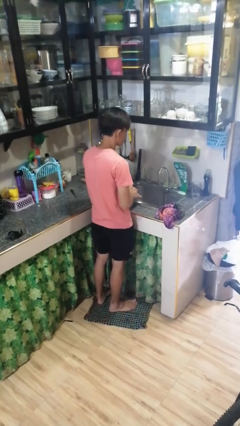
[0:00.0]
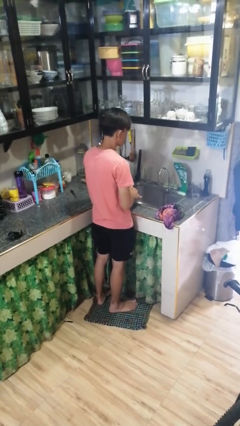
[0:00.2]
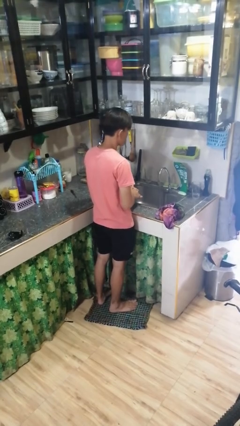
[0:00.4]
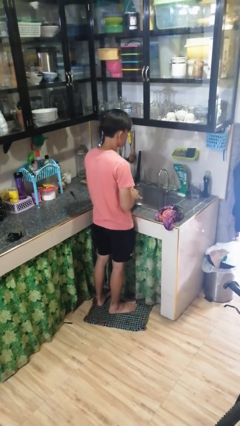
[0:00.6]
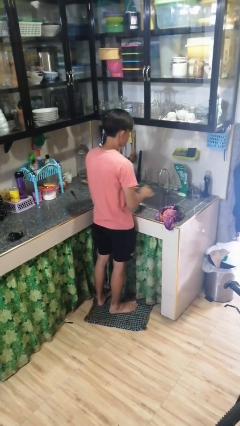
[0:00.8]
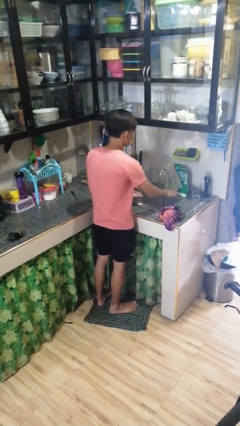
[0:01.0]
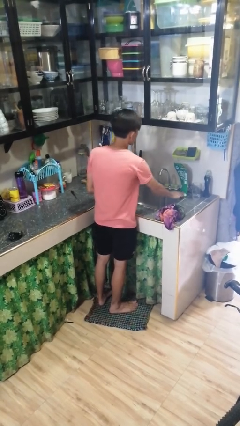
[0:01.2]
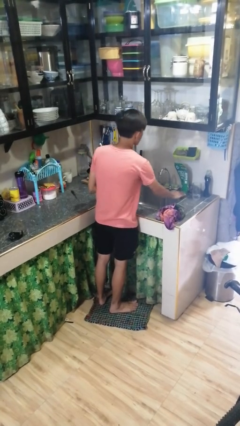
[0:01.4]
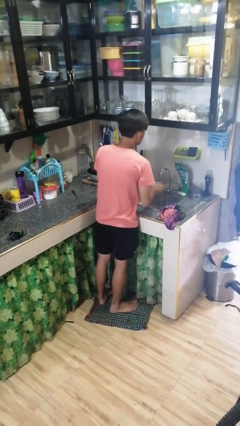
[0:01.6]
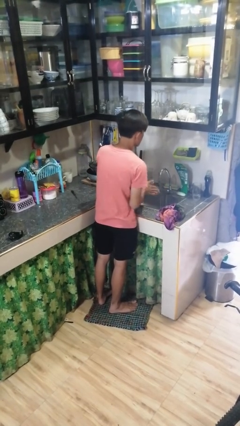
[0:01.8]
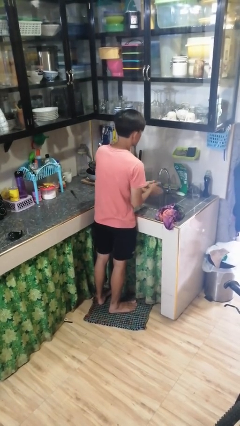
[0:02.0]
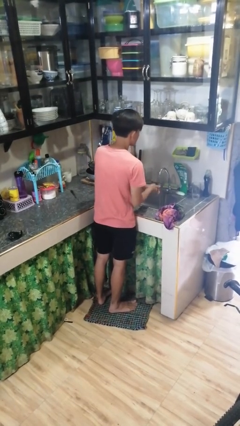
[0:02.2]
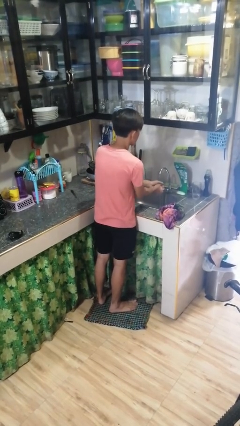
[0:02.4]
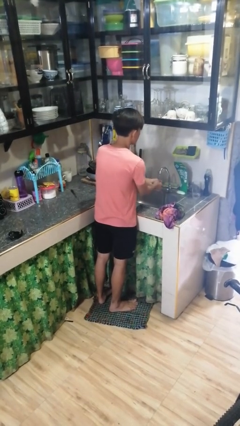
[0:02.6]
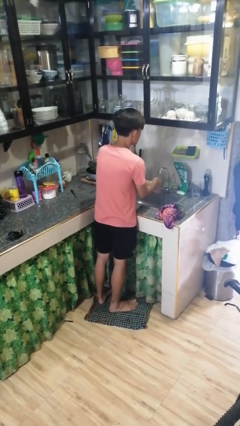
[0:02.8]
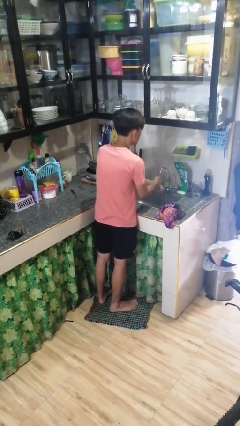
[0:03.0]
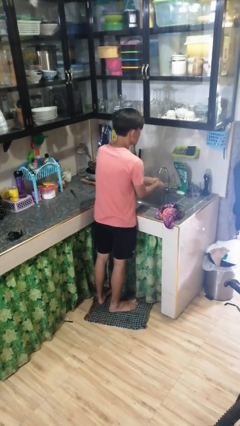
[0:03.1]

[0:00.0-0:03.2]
person washes hands

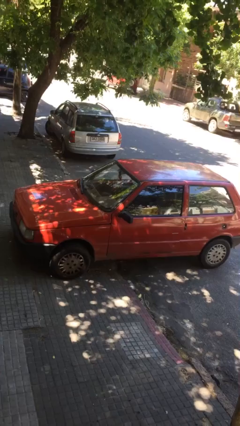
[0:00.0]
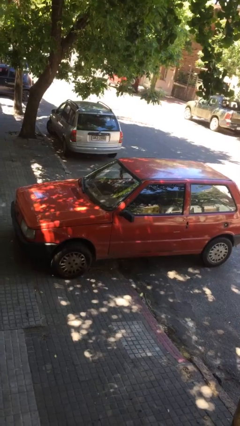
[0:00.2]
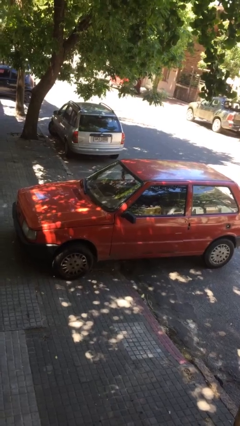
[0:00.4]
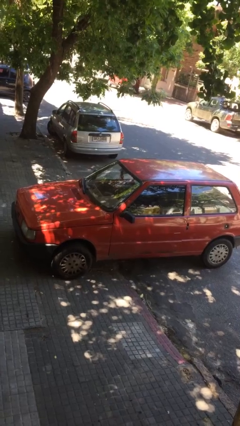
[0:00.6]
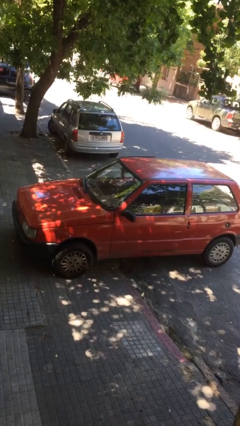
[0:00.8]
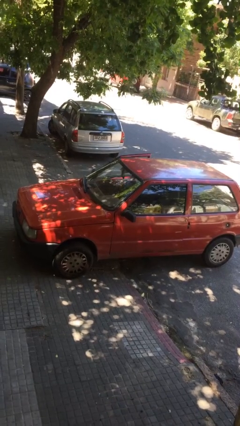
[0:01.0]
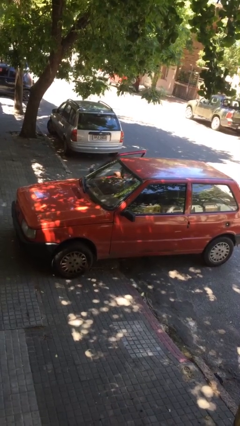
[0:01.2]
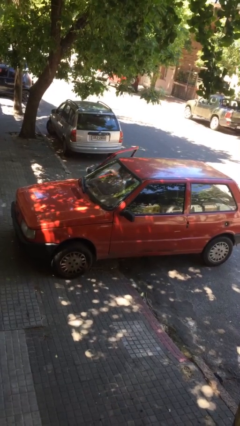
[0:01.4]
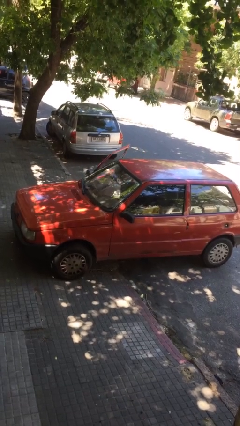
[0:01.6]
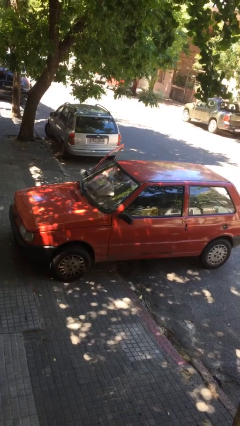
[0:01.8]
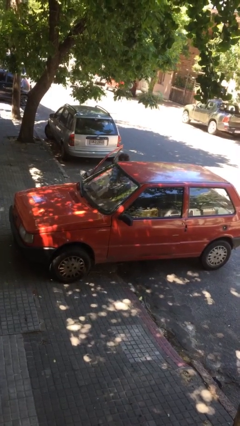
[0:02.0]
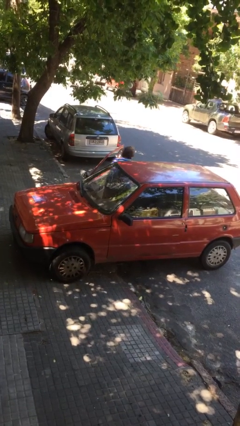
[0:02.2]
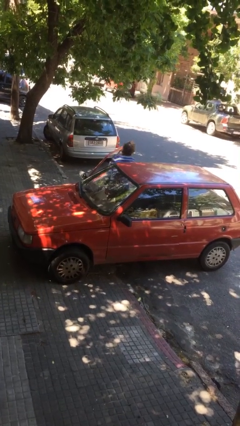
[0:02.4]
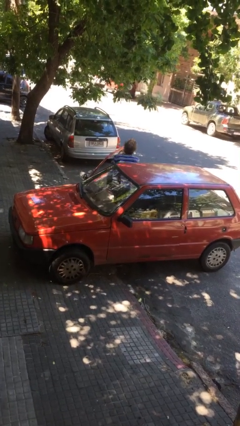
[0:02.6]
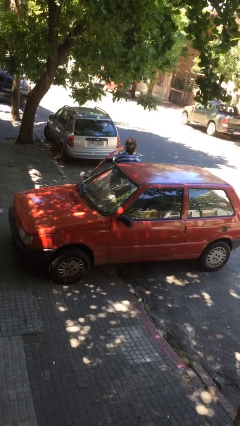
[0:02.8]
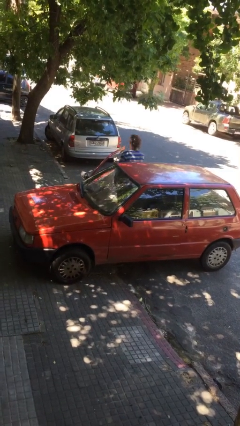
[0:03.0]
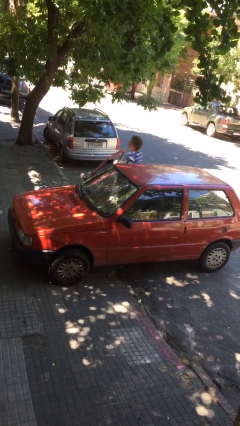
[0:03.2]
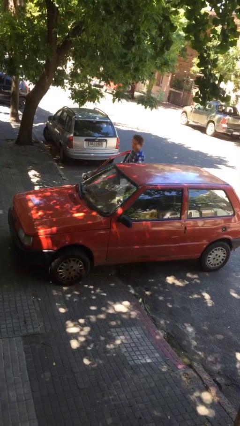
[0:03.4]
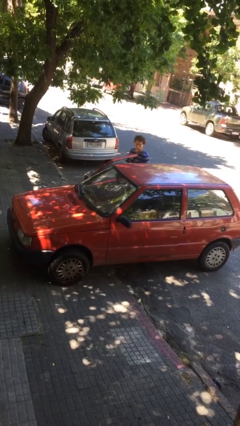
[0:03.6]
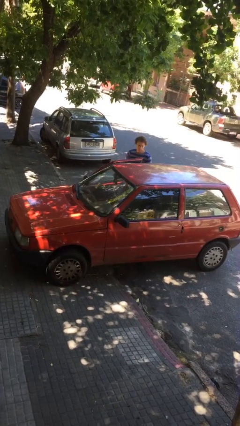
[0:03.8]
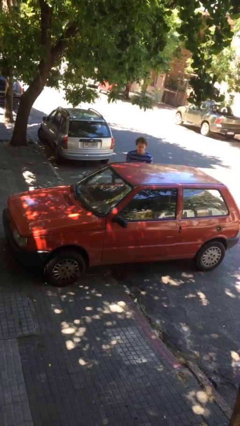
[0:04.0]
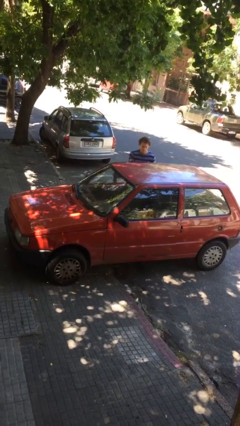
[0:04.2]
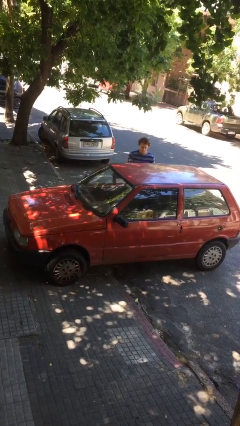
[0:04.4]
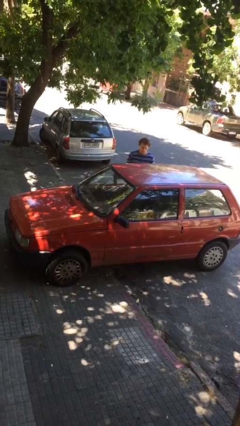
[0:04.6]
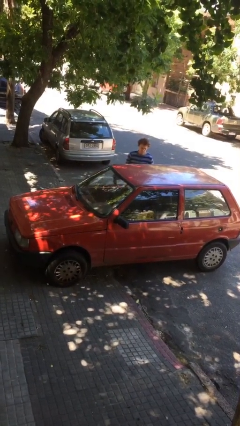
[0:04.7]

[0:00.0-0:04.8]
car drops off person

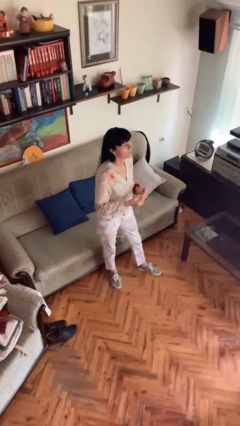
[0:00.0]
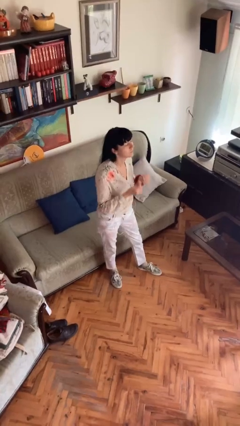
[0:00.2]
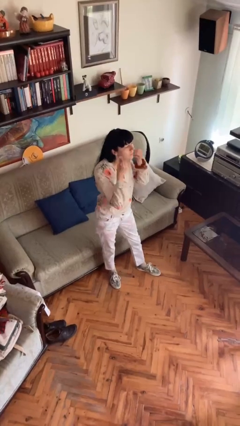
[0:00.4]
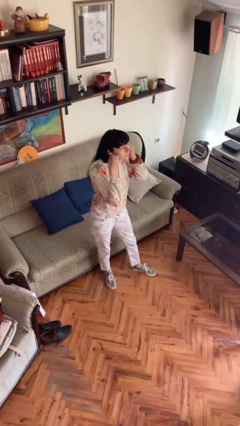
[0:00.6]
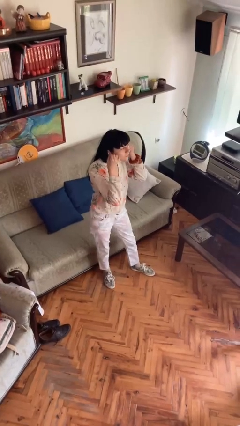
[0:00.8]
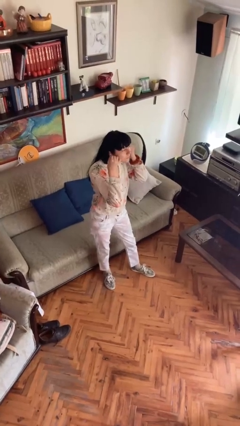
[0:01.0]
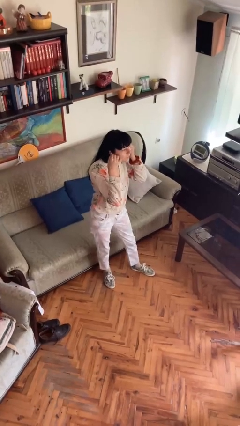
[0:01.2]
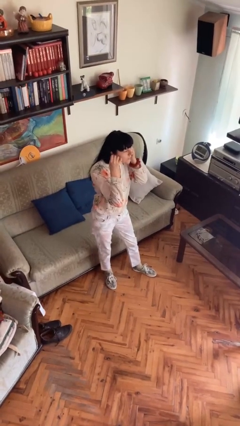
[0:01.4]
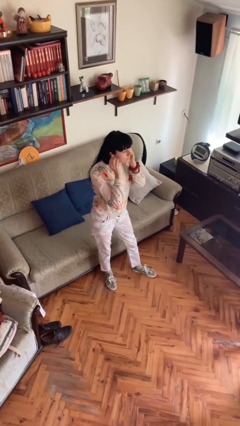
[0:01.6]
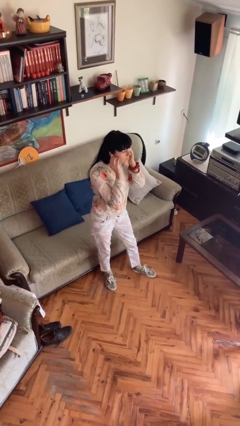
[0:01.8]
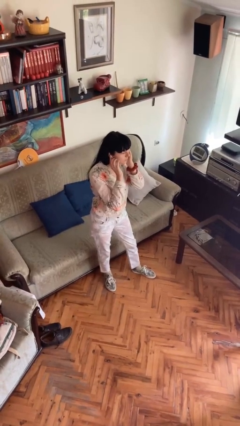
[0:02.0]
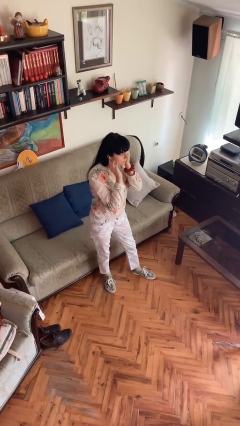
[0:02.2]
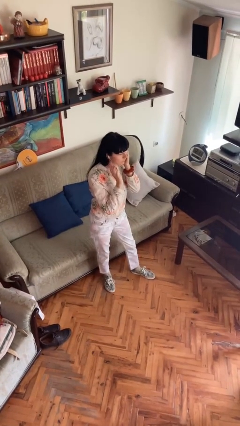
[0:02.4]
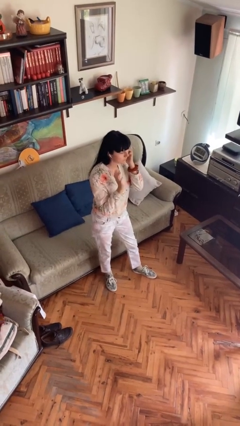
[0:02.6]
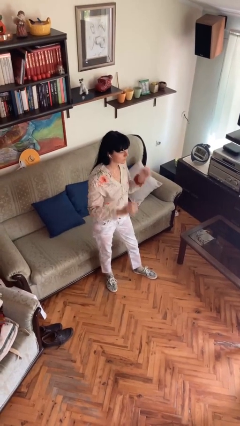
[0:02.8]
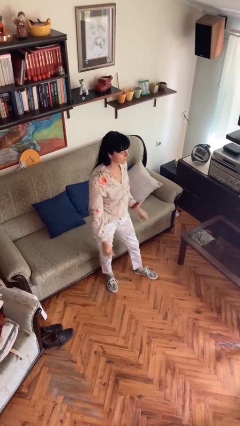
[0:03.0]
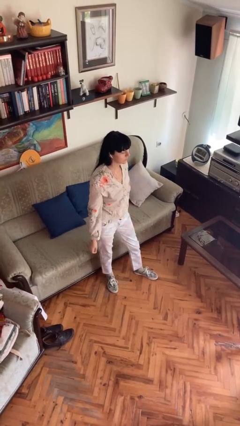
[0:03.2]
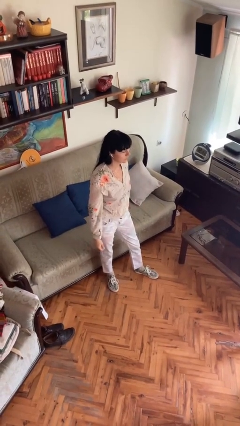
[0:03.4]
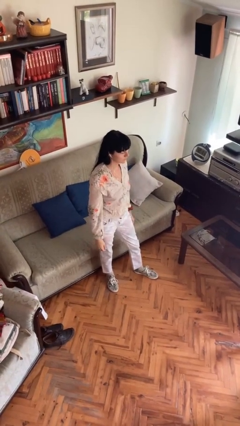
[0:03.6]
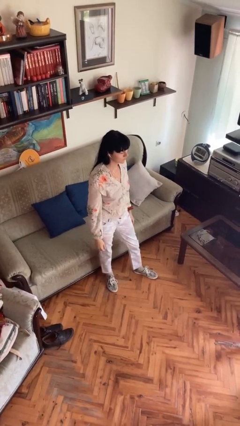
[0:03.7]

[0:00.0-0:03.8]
person puts on headphones

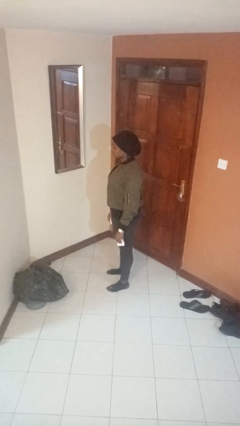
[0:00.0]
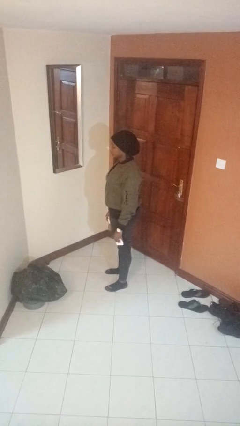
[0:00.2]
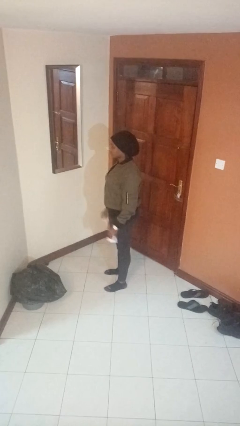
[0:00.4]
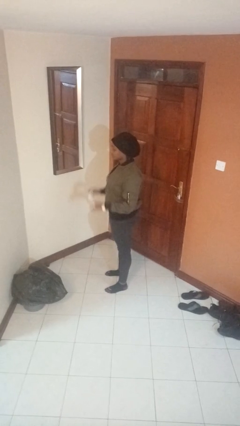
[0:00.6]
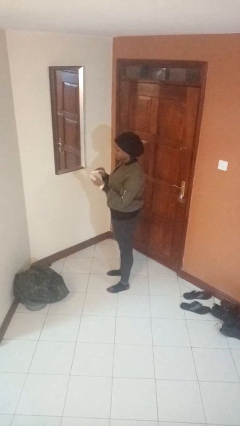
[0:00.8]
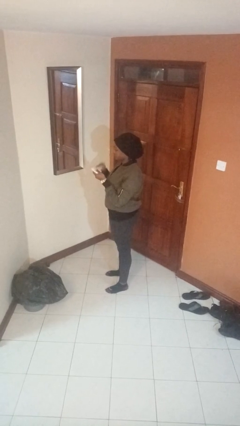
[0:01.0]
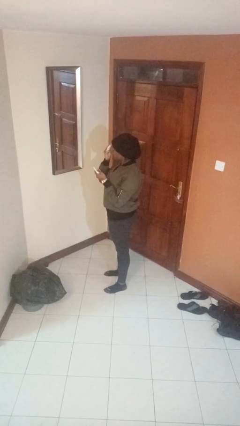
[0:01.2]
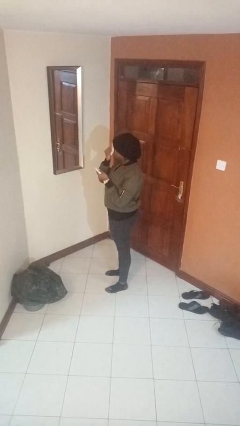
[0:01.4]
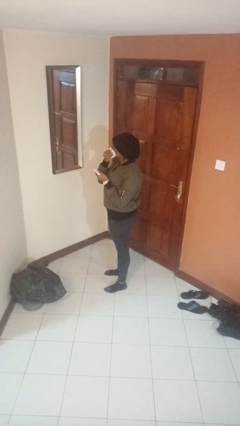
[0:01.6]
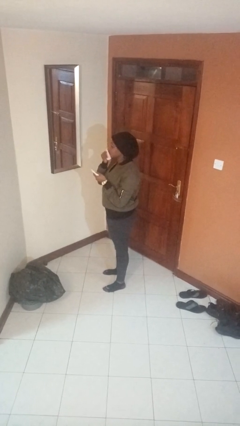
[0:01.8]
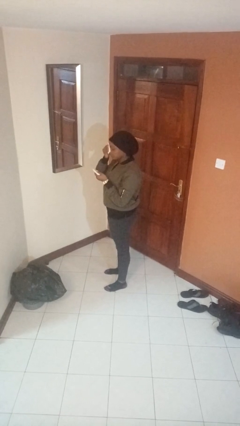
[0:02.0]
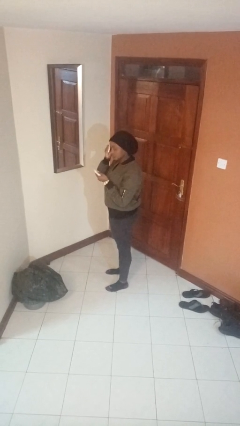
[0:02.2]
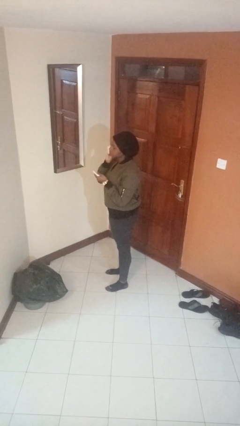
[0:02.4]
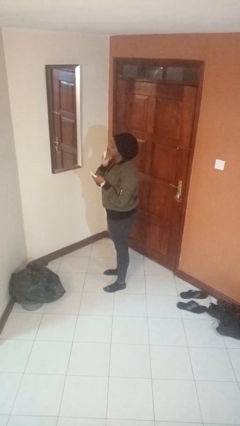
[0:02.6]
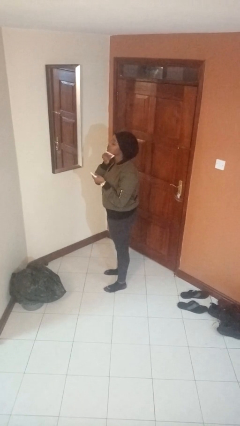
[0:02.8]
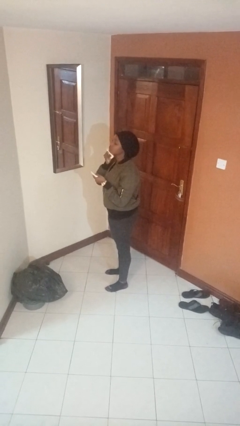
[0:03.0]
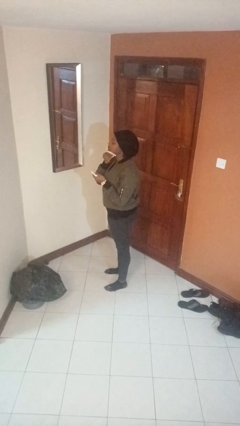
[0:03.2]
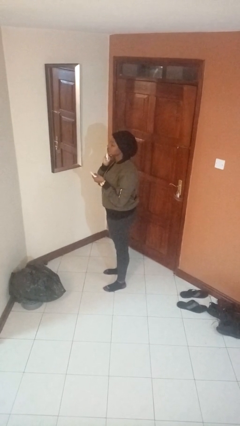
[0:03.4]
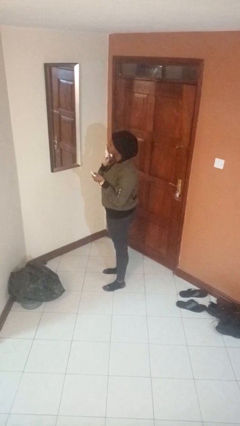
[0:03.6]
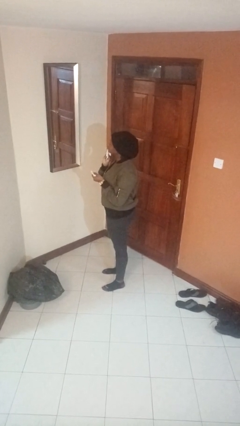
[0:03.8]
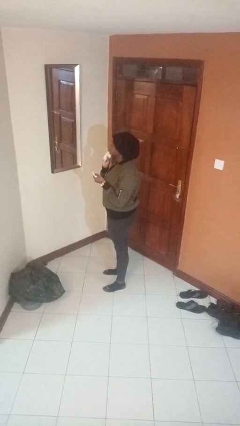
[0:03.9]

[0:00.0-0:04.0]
person applies foundation makeup

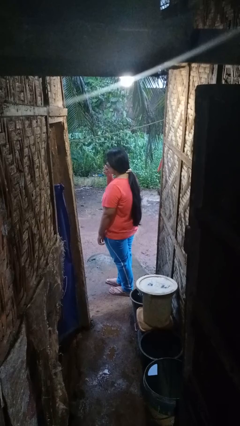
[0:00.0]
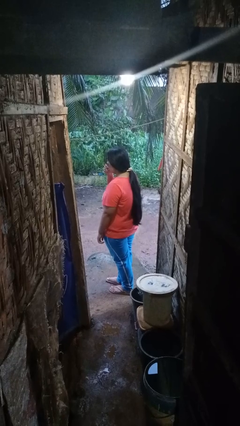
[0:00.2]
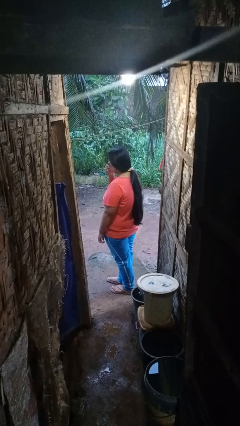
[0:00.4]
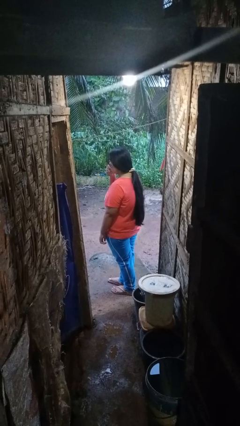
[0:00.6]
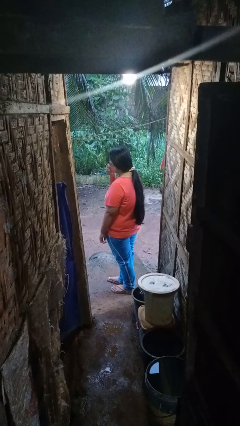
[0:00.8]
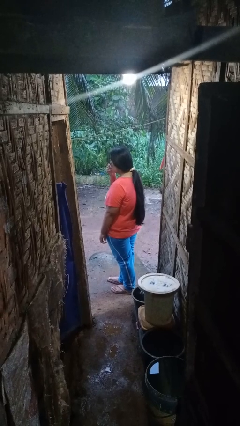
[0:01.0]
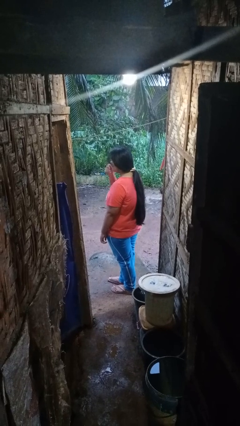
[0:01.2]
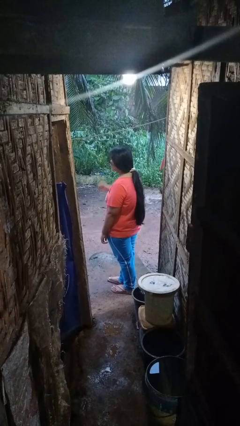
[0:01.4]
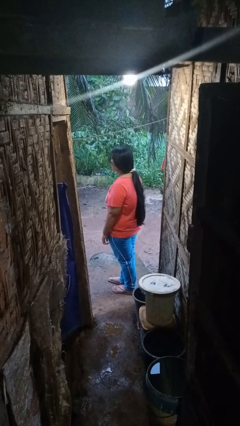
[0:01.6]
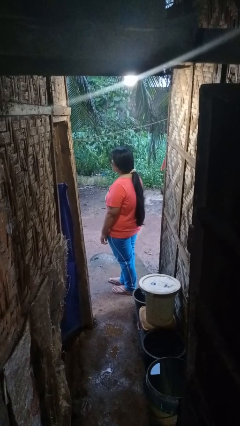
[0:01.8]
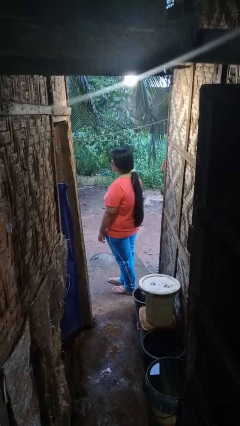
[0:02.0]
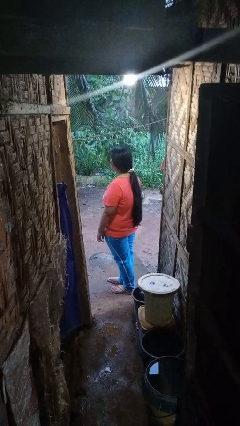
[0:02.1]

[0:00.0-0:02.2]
person blows into hands
